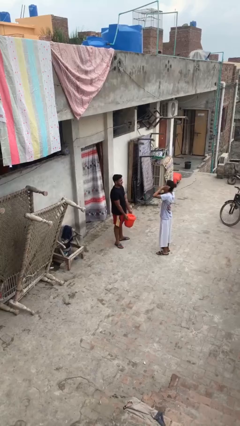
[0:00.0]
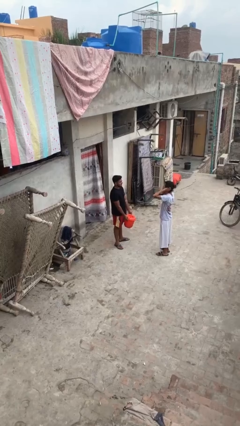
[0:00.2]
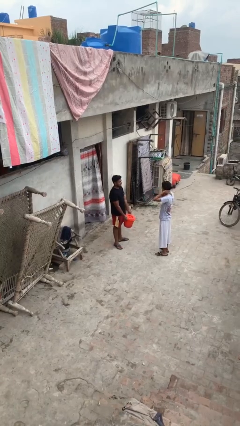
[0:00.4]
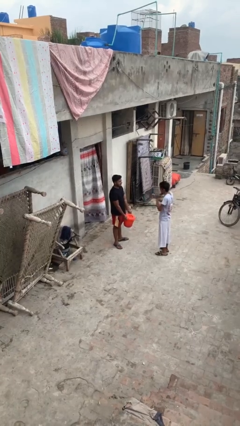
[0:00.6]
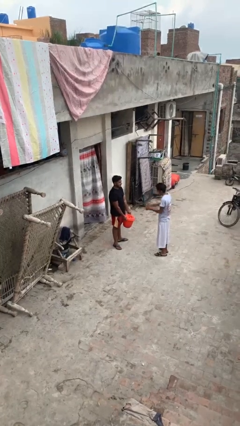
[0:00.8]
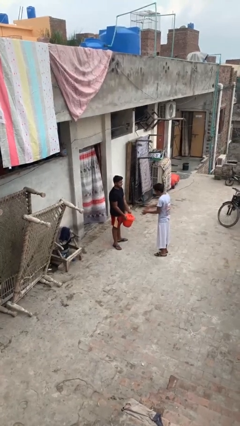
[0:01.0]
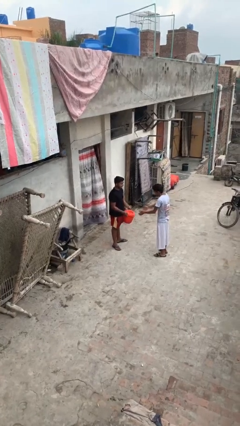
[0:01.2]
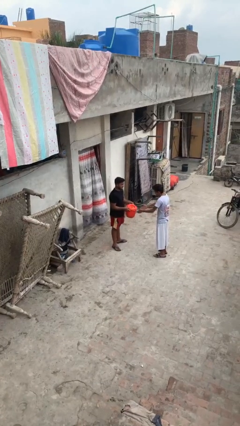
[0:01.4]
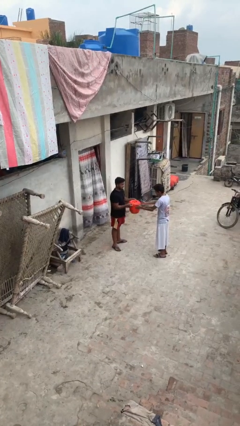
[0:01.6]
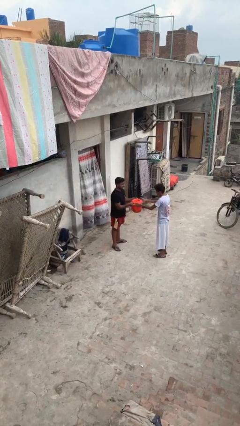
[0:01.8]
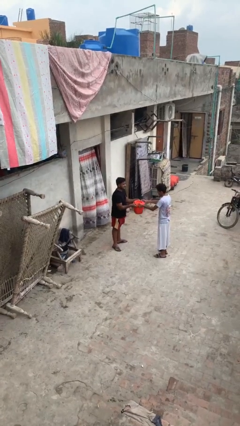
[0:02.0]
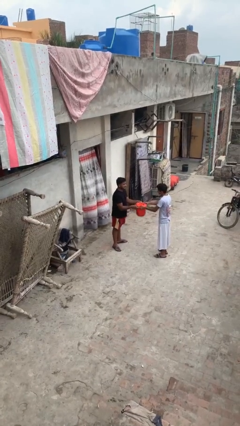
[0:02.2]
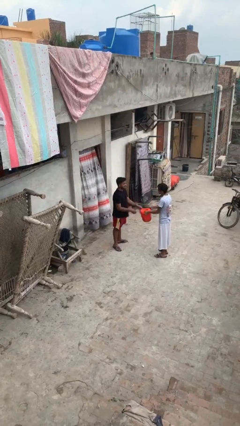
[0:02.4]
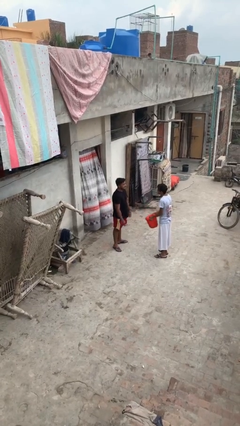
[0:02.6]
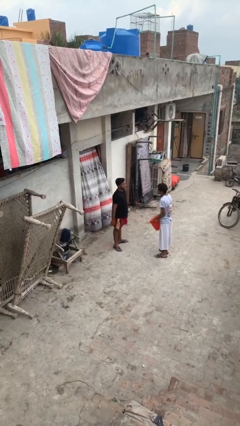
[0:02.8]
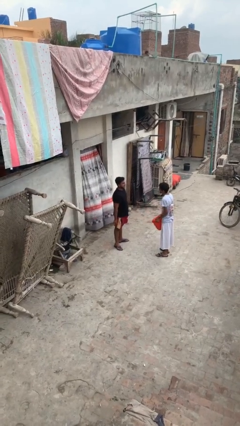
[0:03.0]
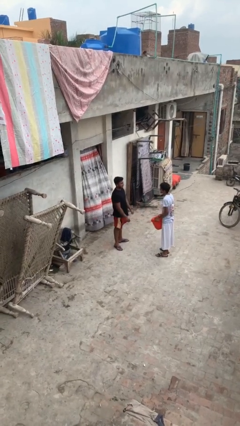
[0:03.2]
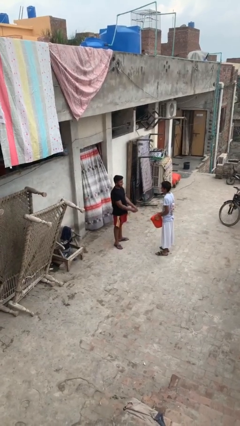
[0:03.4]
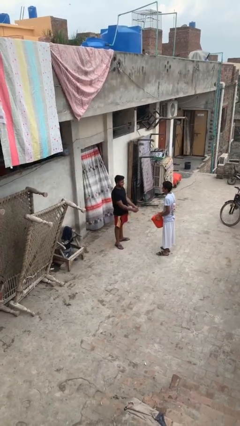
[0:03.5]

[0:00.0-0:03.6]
person transfers object to person

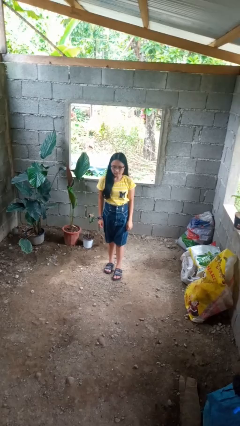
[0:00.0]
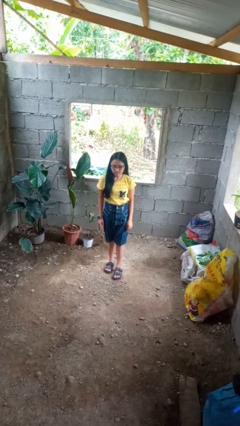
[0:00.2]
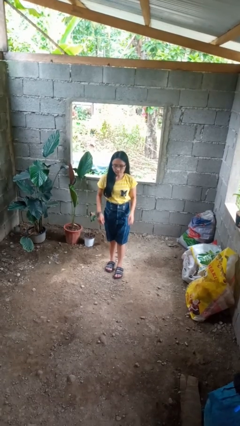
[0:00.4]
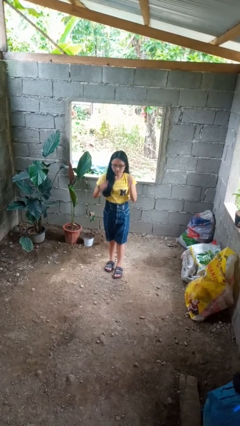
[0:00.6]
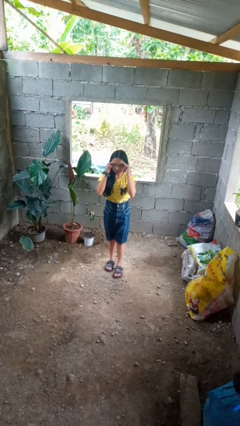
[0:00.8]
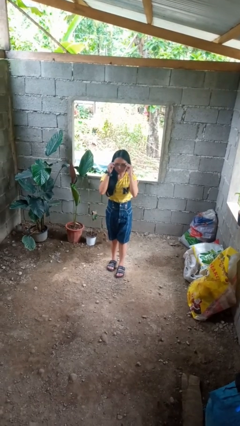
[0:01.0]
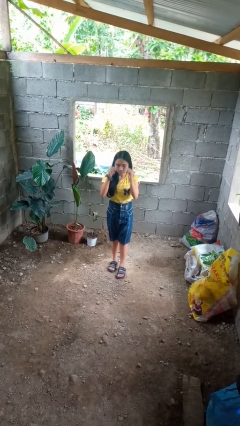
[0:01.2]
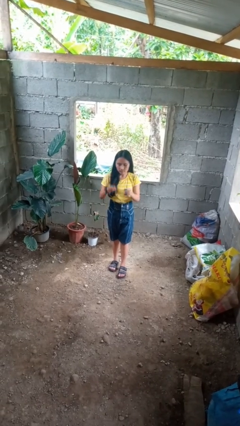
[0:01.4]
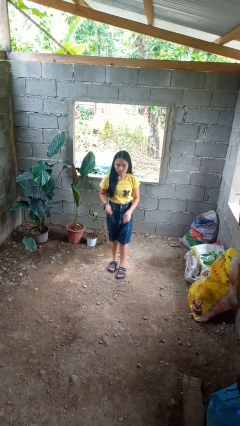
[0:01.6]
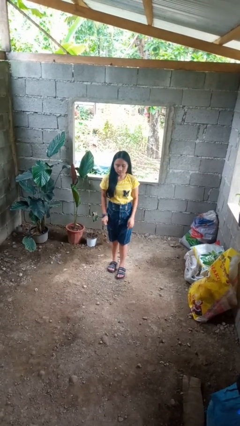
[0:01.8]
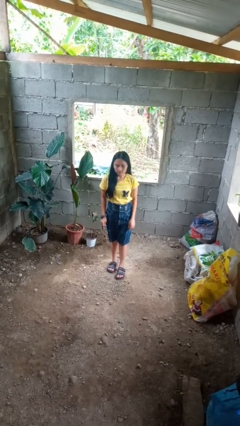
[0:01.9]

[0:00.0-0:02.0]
person takes off glasses

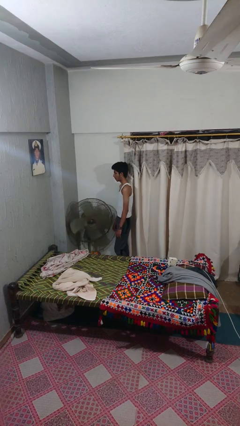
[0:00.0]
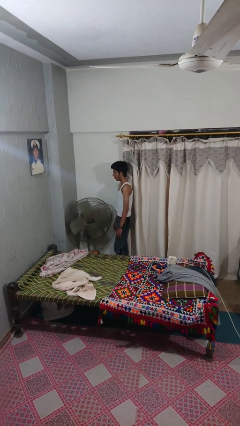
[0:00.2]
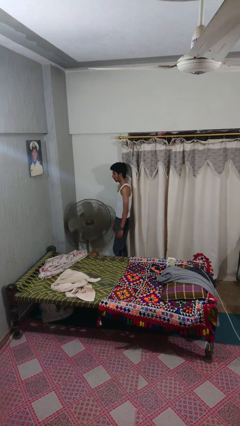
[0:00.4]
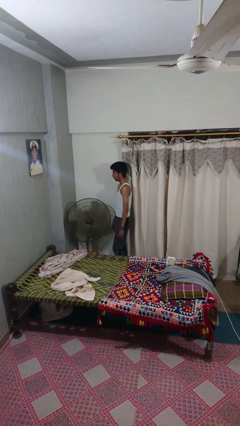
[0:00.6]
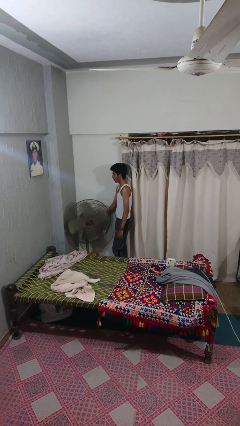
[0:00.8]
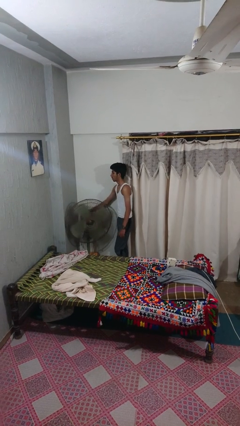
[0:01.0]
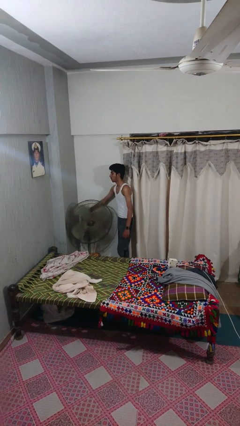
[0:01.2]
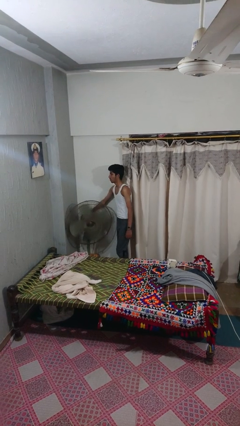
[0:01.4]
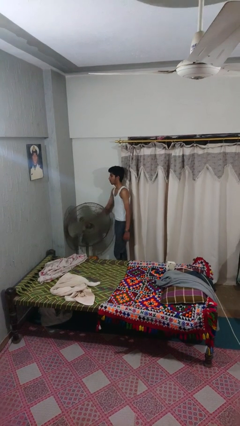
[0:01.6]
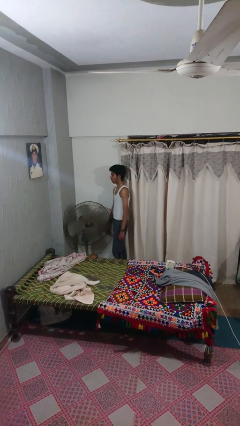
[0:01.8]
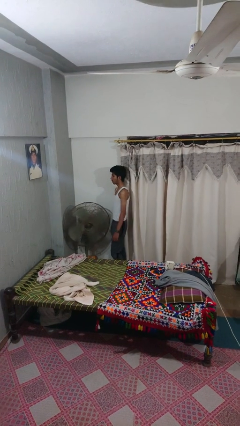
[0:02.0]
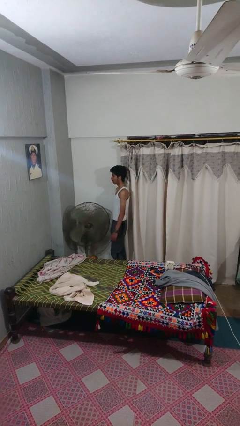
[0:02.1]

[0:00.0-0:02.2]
person turns off fan

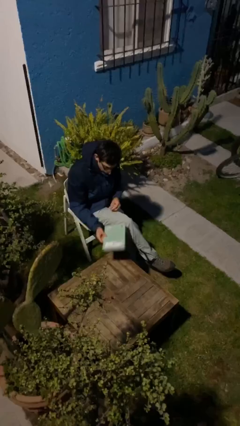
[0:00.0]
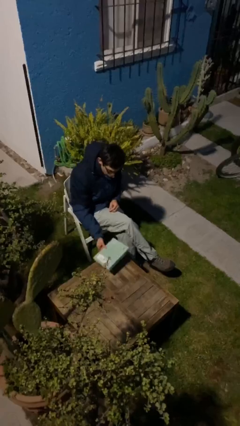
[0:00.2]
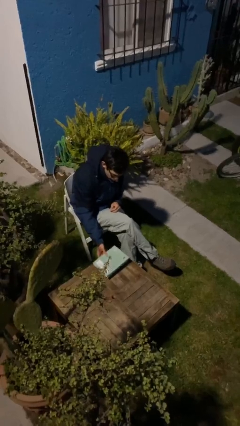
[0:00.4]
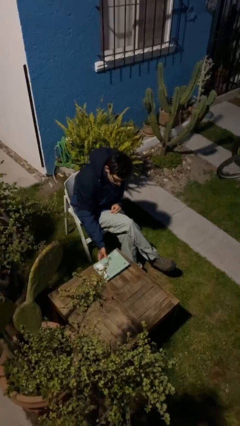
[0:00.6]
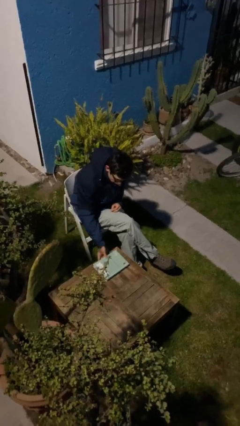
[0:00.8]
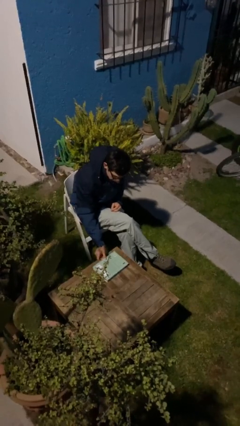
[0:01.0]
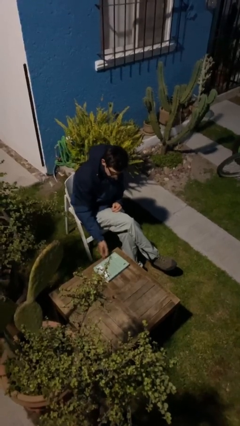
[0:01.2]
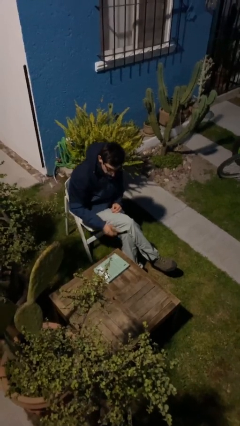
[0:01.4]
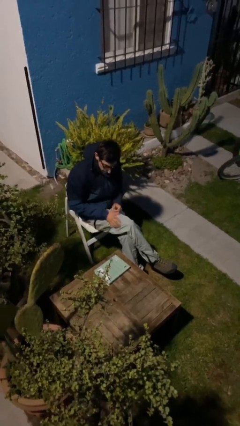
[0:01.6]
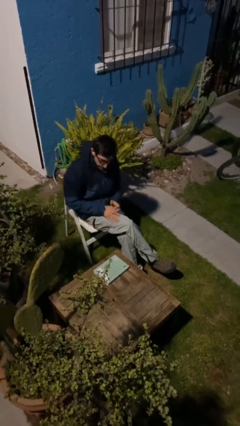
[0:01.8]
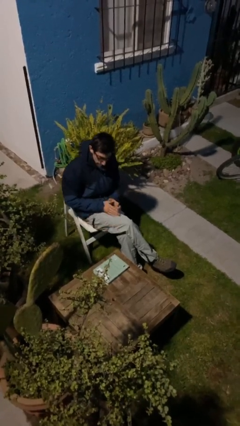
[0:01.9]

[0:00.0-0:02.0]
person puts down object on table

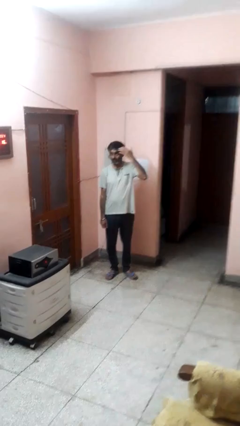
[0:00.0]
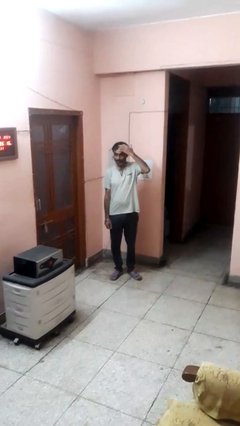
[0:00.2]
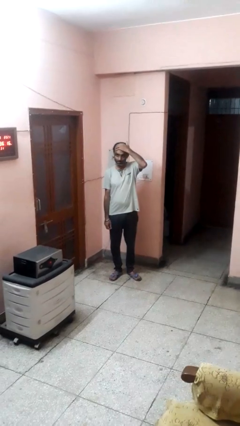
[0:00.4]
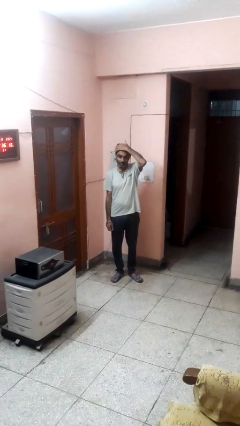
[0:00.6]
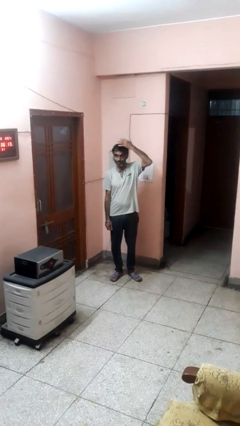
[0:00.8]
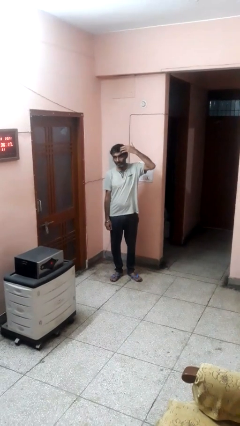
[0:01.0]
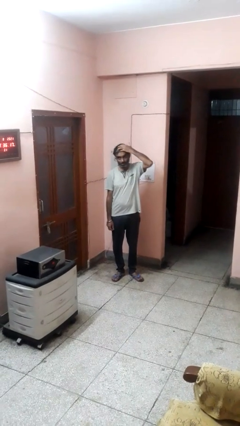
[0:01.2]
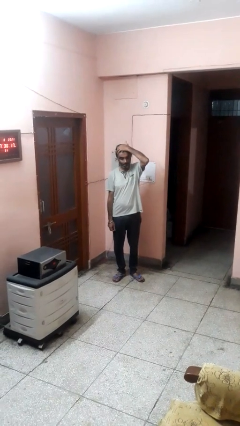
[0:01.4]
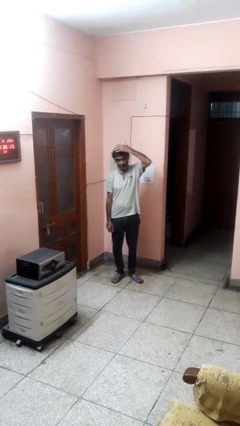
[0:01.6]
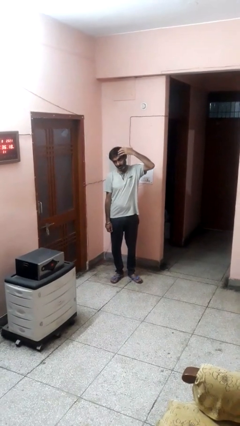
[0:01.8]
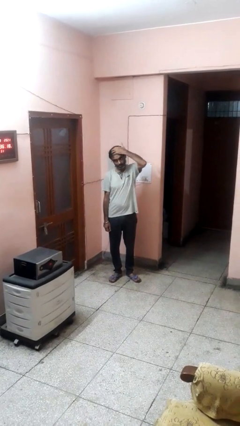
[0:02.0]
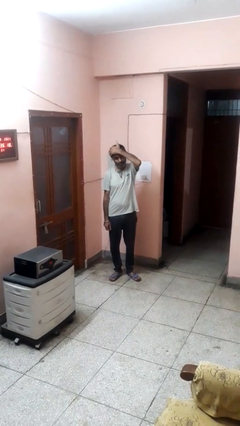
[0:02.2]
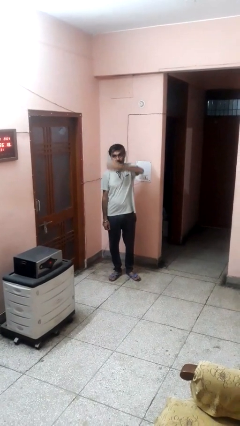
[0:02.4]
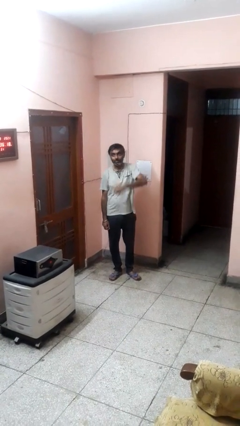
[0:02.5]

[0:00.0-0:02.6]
person strokes hair

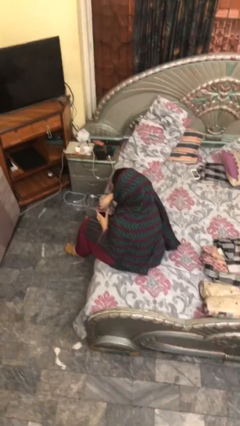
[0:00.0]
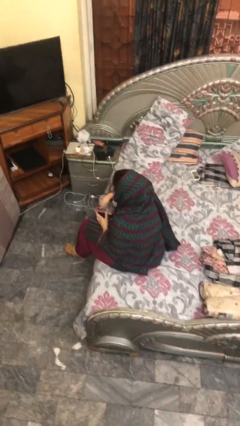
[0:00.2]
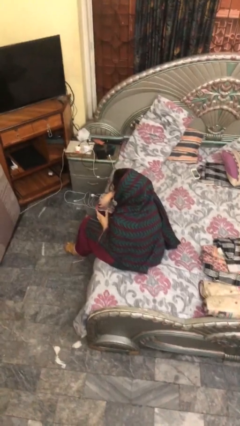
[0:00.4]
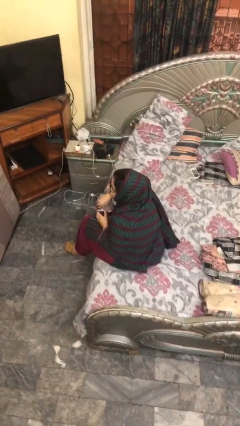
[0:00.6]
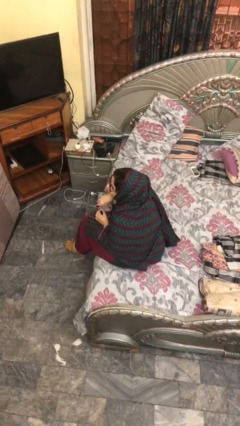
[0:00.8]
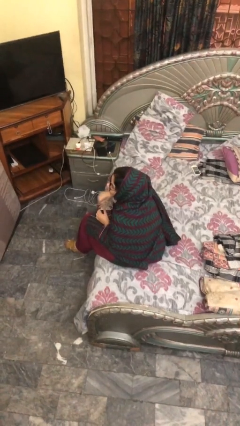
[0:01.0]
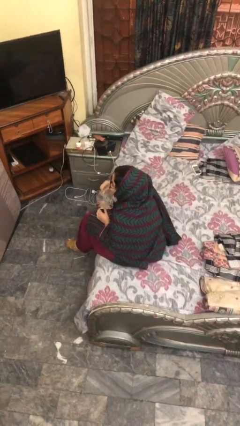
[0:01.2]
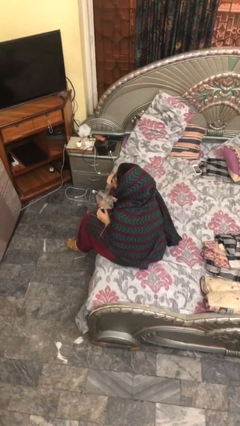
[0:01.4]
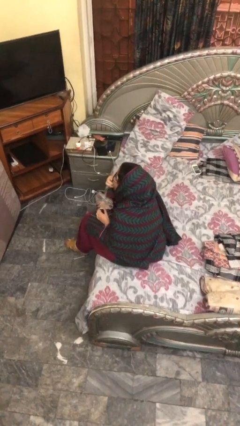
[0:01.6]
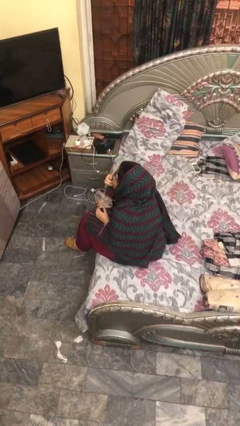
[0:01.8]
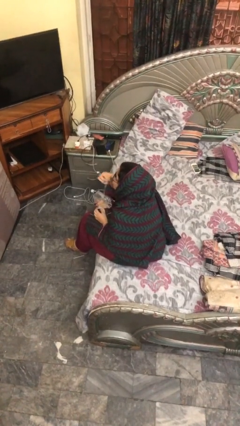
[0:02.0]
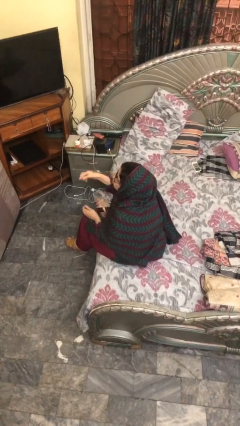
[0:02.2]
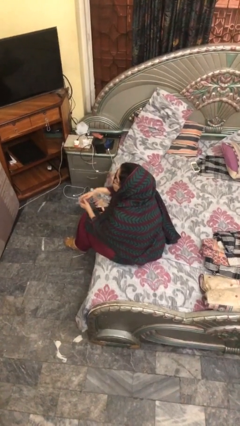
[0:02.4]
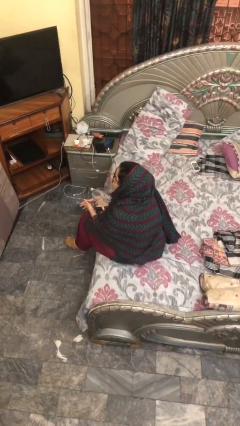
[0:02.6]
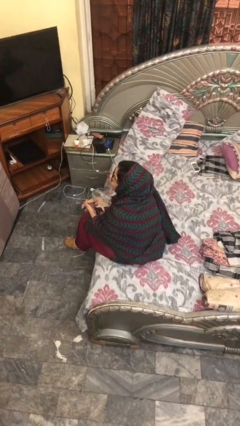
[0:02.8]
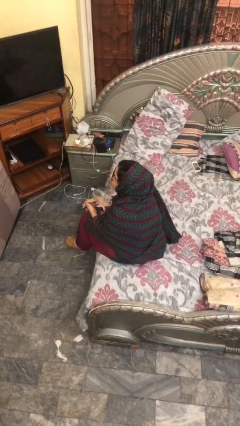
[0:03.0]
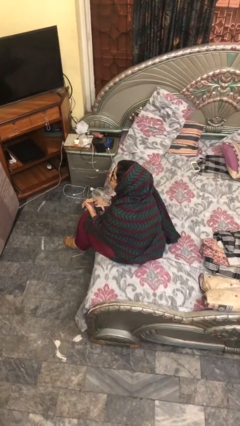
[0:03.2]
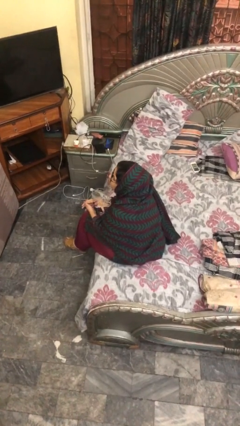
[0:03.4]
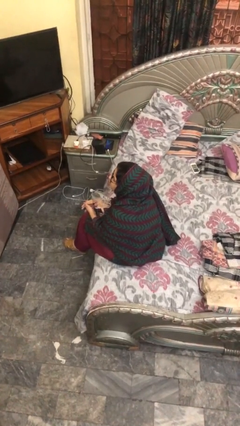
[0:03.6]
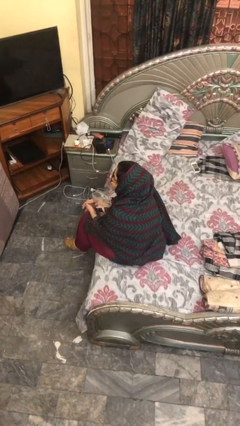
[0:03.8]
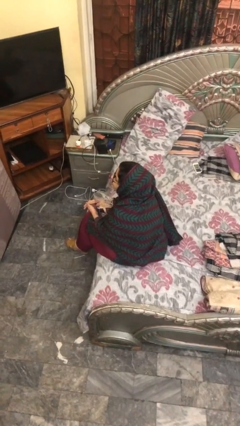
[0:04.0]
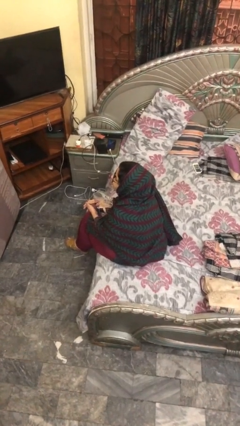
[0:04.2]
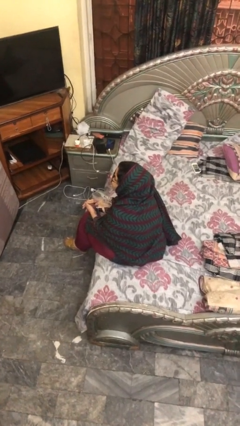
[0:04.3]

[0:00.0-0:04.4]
person eats snack from bag

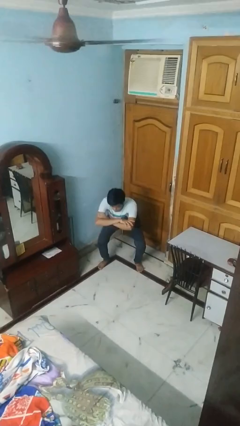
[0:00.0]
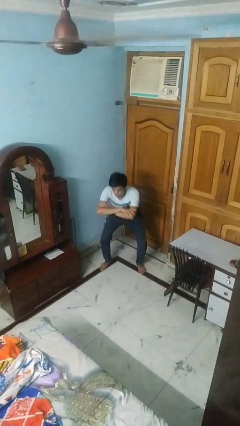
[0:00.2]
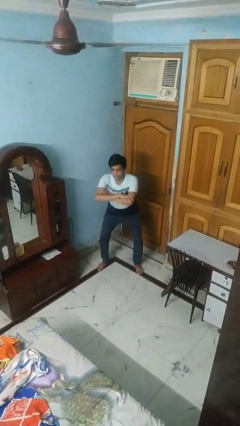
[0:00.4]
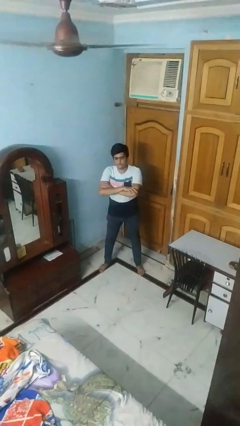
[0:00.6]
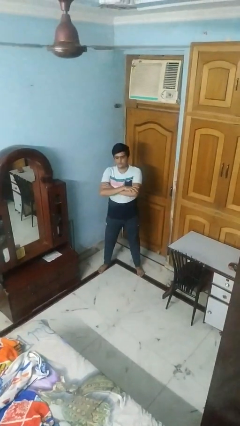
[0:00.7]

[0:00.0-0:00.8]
person stands up
